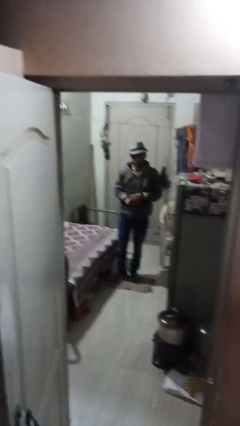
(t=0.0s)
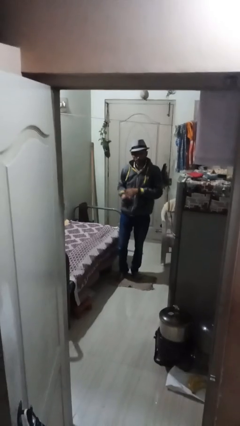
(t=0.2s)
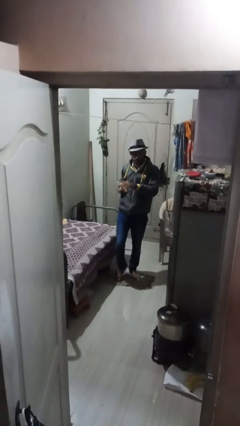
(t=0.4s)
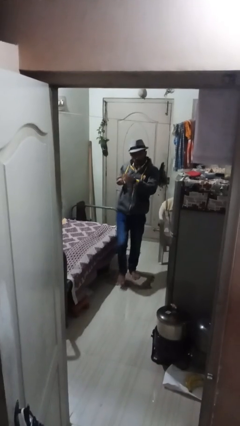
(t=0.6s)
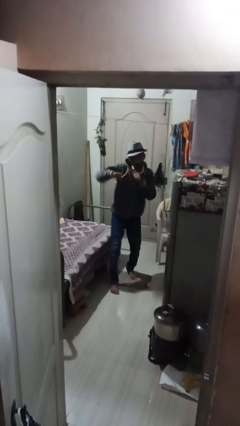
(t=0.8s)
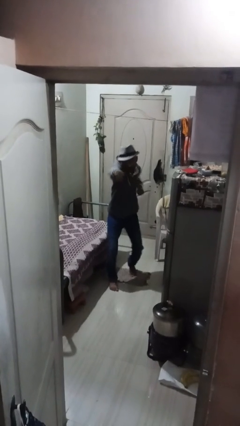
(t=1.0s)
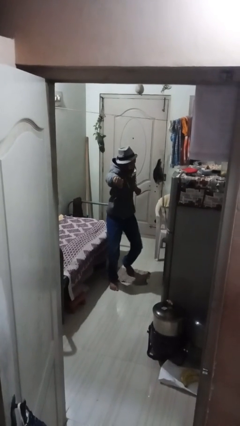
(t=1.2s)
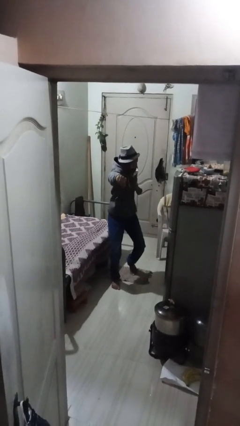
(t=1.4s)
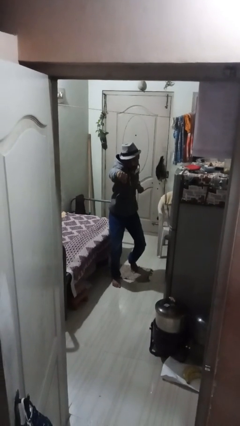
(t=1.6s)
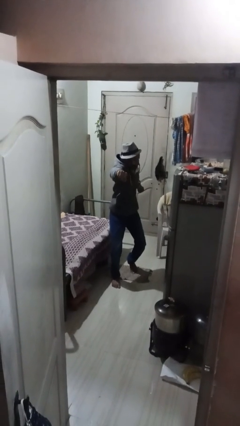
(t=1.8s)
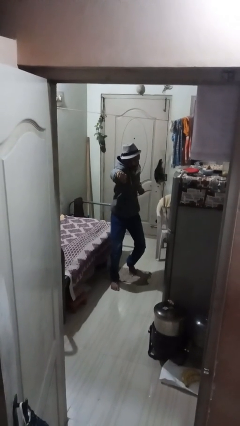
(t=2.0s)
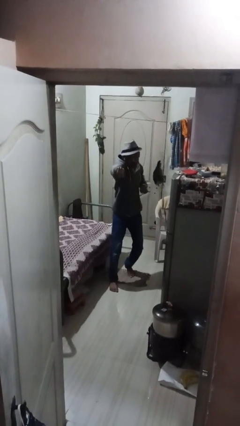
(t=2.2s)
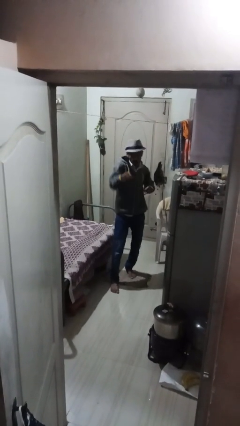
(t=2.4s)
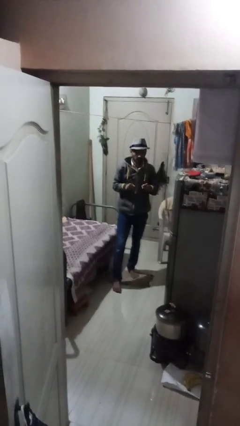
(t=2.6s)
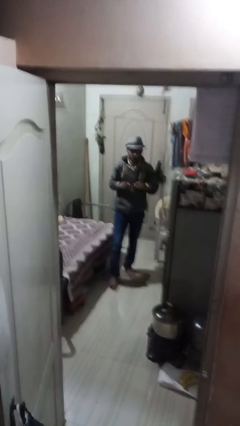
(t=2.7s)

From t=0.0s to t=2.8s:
person punches

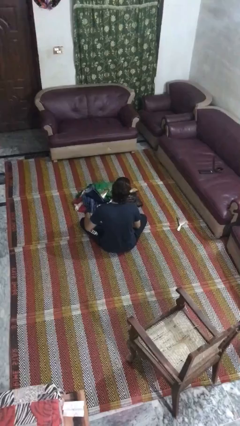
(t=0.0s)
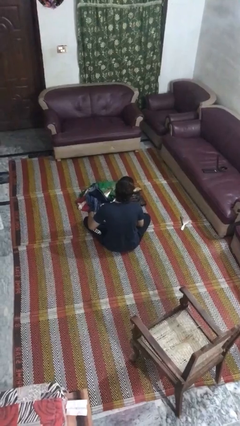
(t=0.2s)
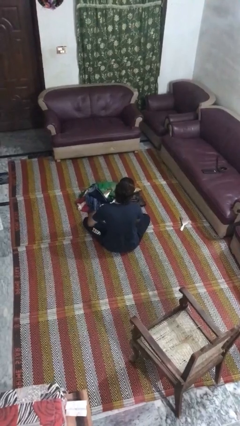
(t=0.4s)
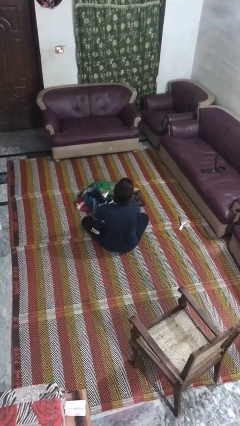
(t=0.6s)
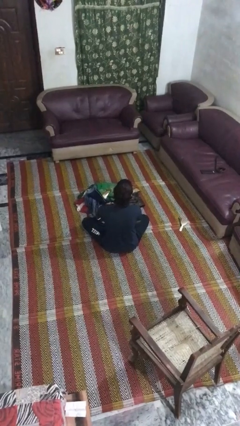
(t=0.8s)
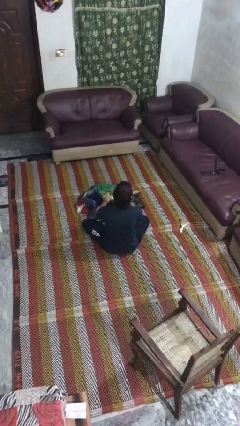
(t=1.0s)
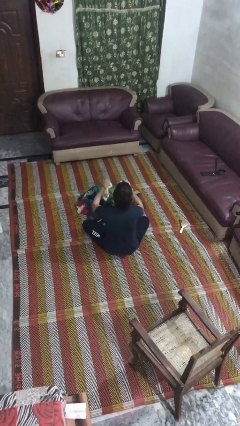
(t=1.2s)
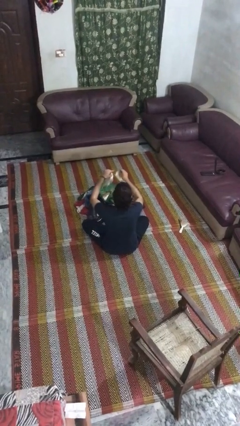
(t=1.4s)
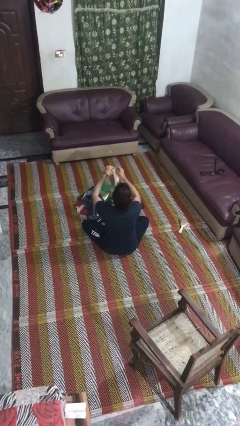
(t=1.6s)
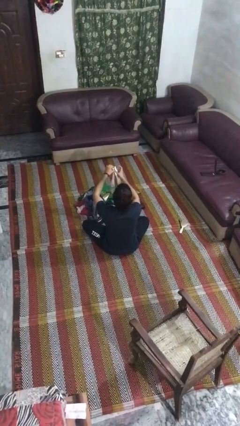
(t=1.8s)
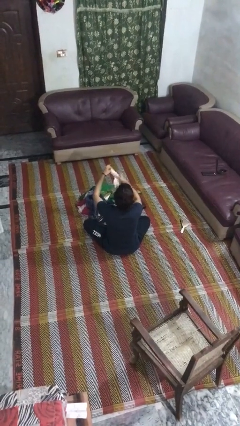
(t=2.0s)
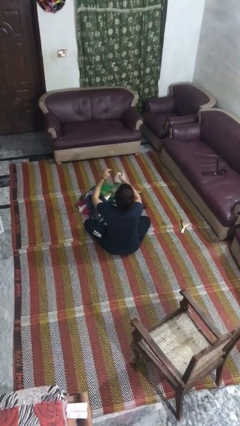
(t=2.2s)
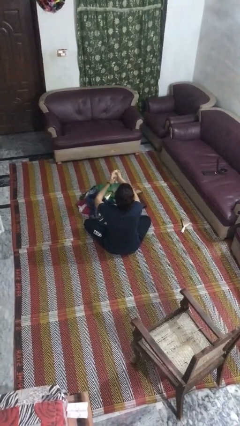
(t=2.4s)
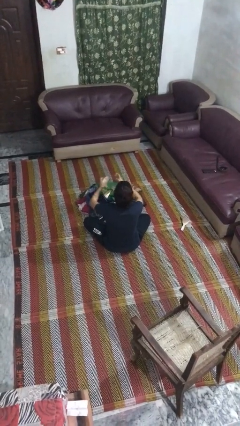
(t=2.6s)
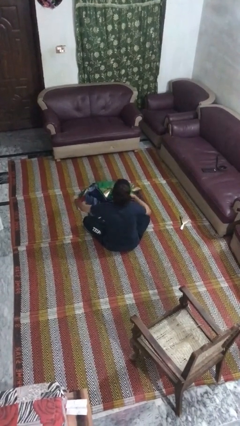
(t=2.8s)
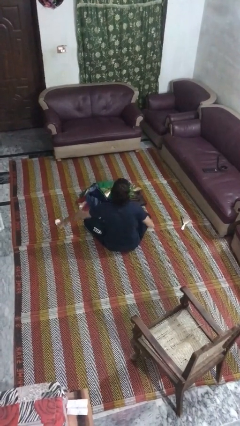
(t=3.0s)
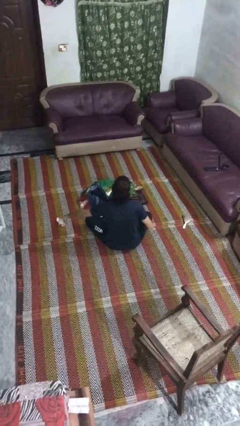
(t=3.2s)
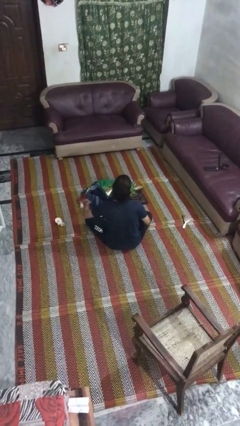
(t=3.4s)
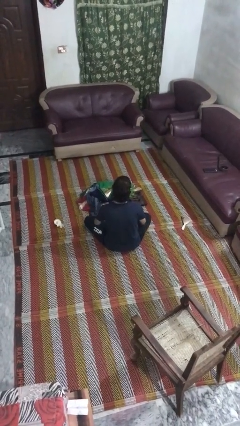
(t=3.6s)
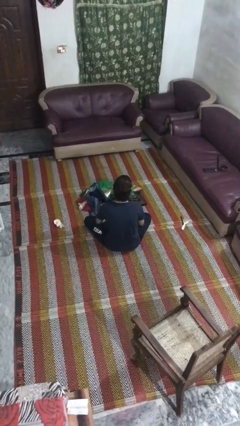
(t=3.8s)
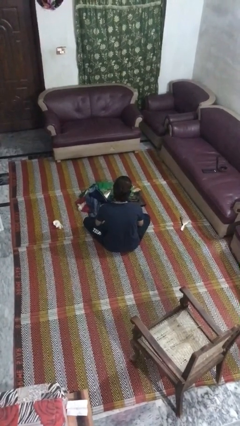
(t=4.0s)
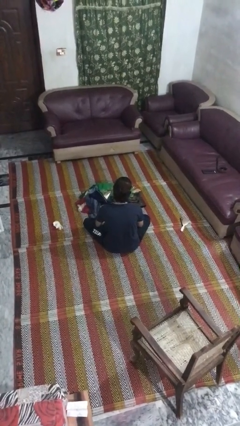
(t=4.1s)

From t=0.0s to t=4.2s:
person folds socks

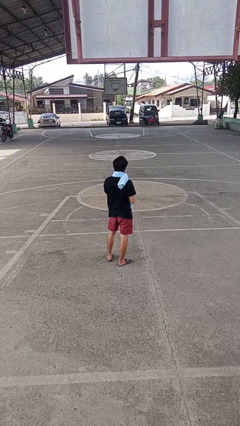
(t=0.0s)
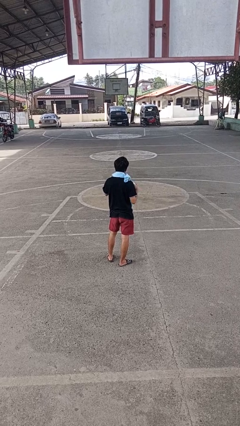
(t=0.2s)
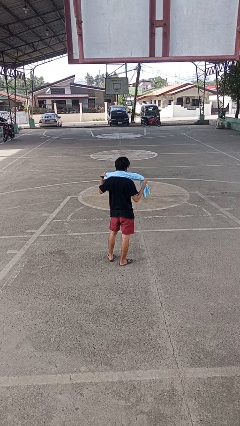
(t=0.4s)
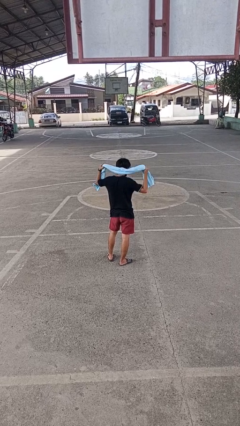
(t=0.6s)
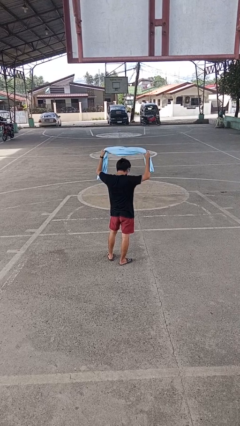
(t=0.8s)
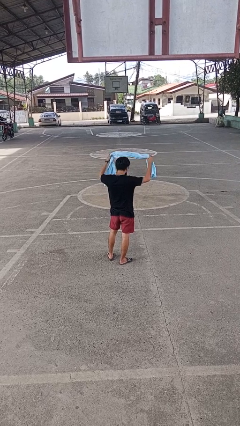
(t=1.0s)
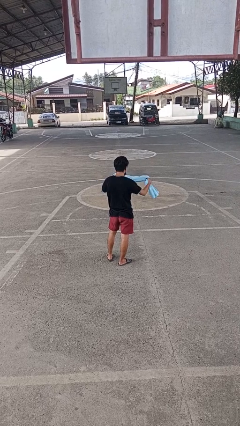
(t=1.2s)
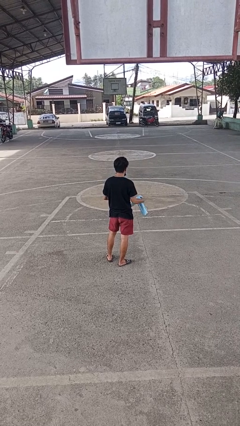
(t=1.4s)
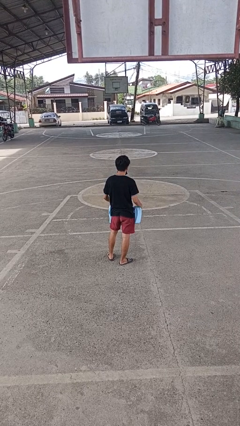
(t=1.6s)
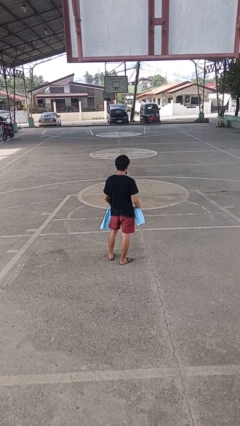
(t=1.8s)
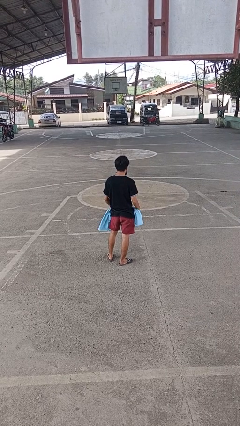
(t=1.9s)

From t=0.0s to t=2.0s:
person takes off scarf

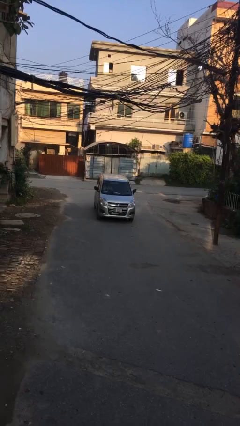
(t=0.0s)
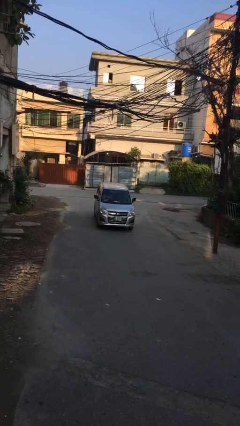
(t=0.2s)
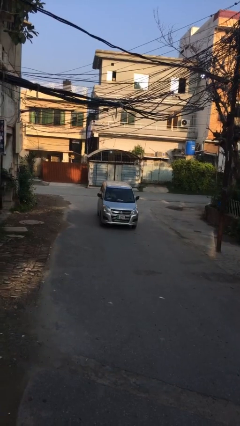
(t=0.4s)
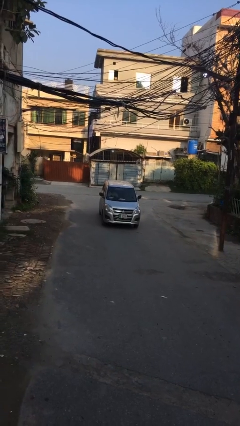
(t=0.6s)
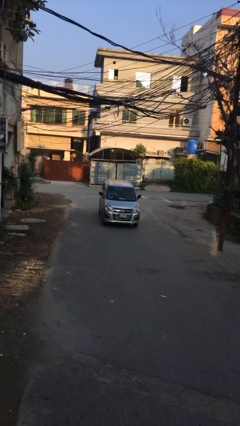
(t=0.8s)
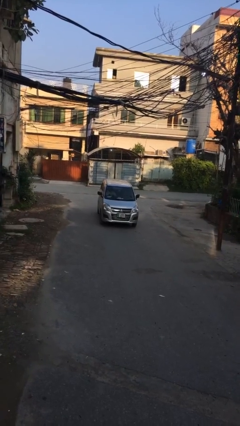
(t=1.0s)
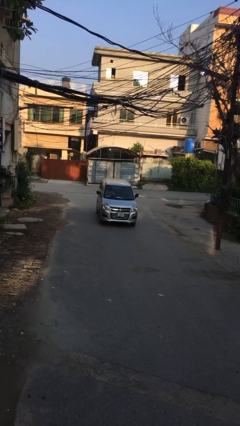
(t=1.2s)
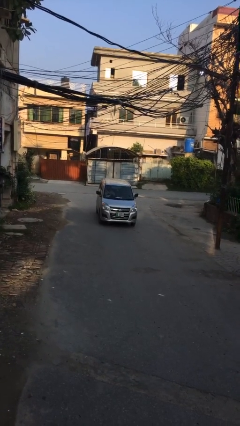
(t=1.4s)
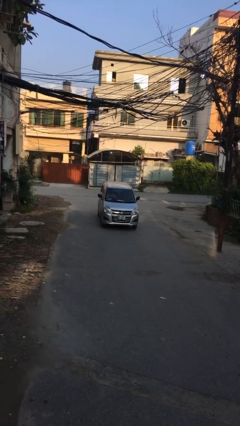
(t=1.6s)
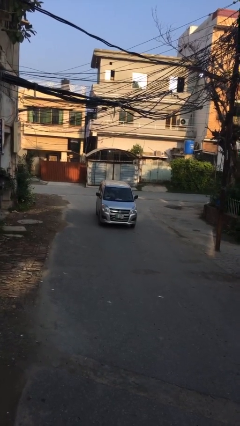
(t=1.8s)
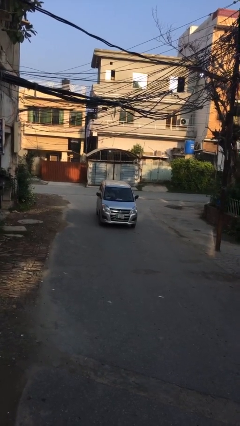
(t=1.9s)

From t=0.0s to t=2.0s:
car drops off person

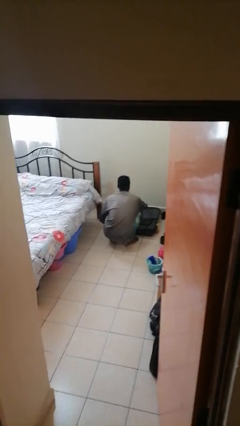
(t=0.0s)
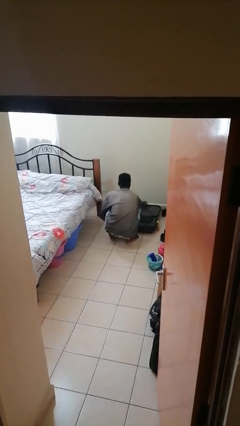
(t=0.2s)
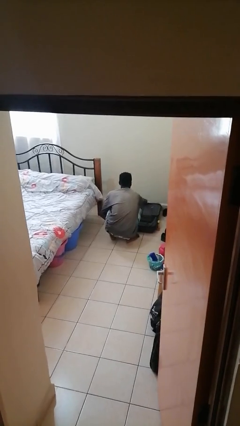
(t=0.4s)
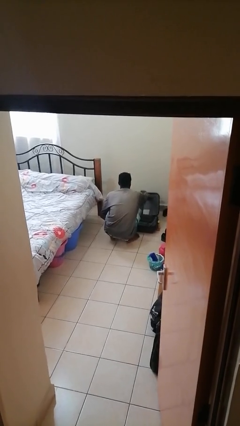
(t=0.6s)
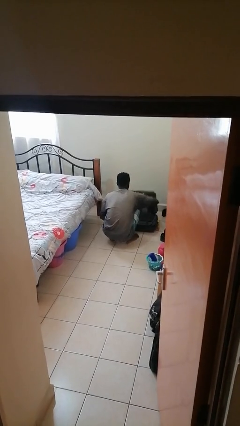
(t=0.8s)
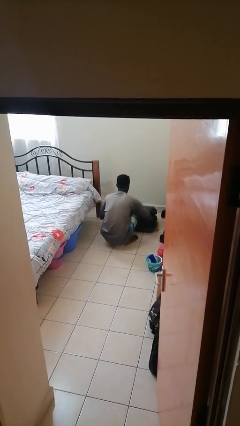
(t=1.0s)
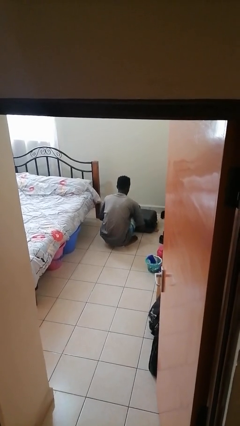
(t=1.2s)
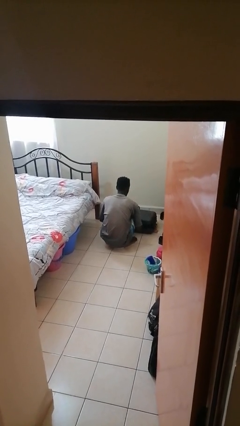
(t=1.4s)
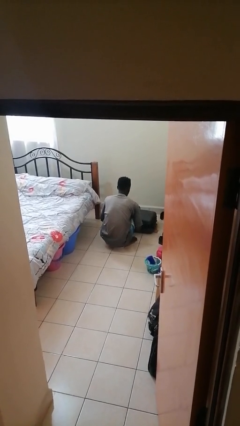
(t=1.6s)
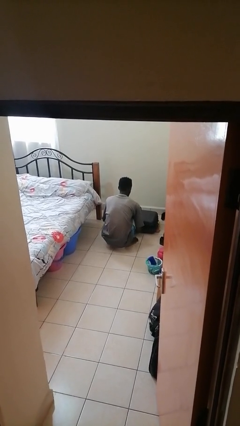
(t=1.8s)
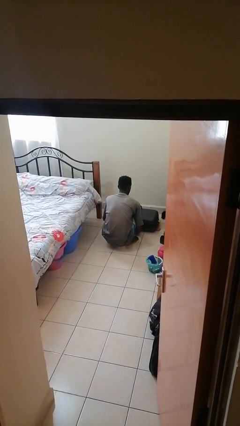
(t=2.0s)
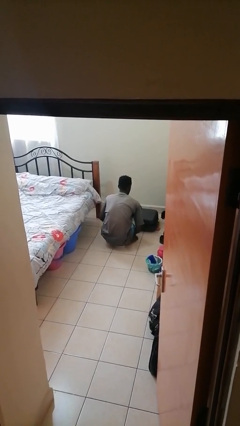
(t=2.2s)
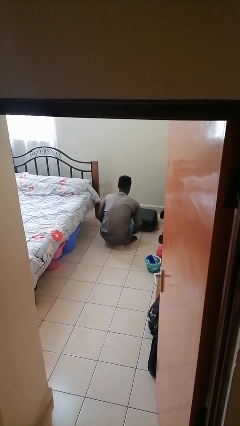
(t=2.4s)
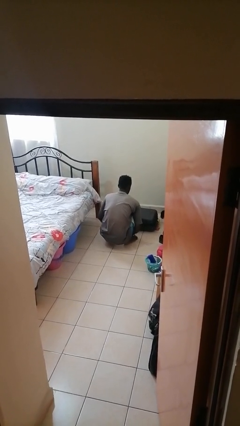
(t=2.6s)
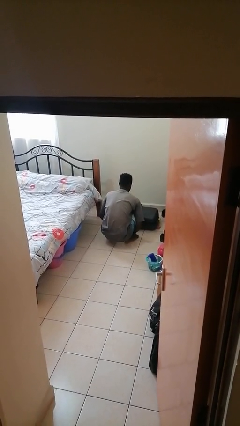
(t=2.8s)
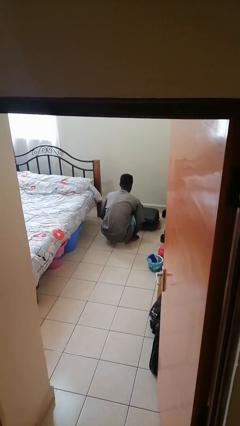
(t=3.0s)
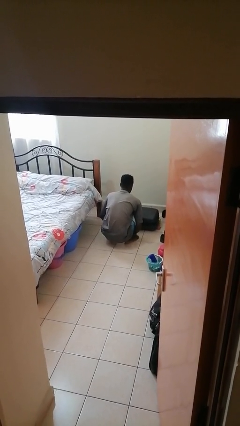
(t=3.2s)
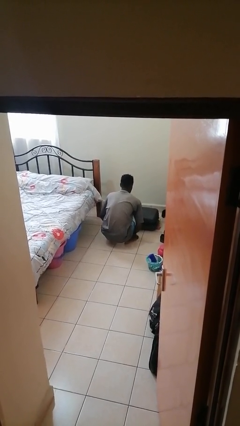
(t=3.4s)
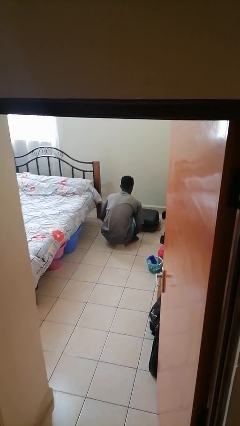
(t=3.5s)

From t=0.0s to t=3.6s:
person closes suitcase

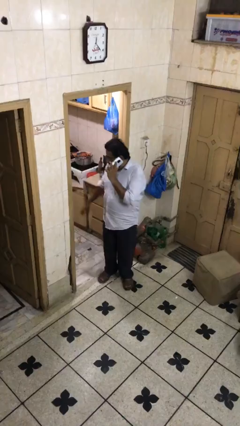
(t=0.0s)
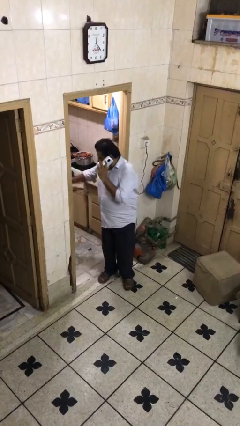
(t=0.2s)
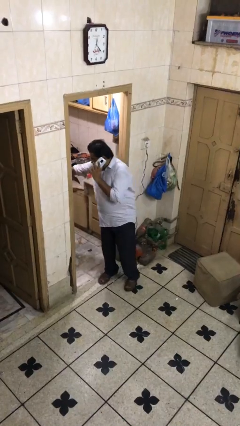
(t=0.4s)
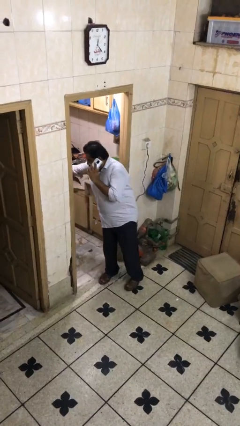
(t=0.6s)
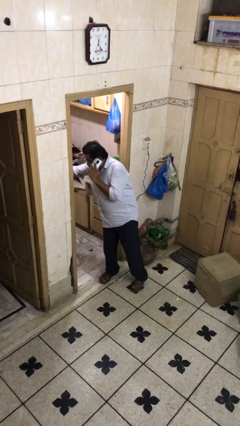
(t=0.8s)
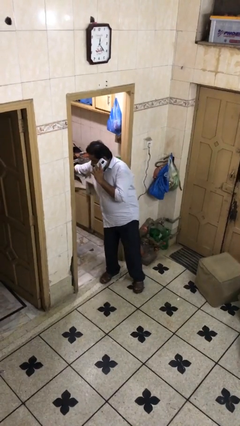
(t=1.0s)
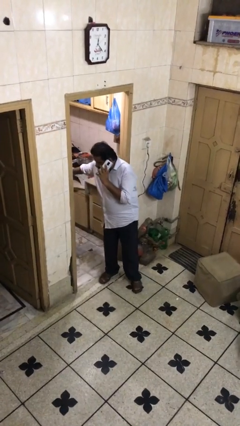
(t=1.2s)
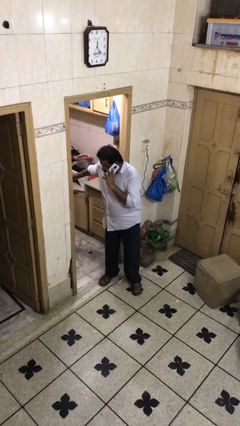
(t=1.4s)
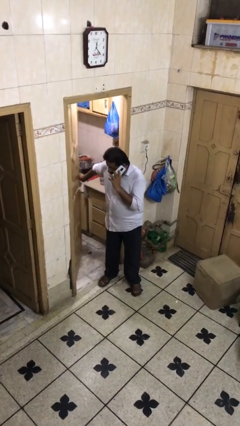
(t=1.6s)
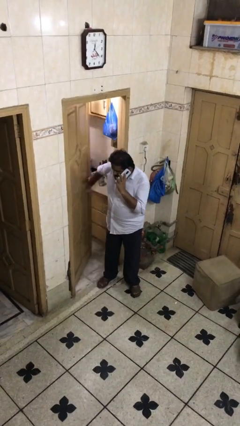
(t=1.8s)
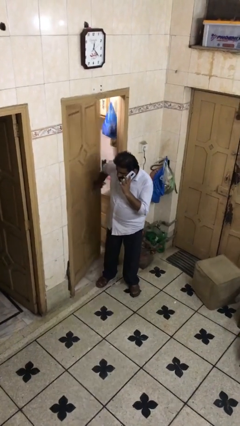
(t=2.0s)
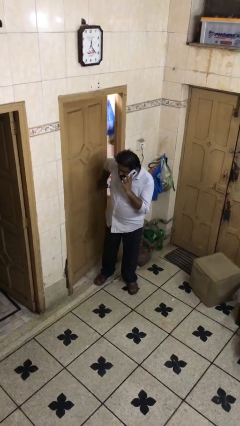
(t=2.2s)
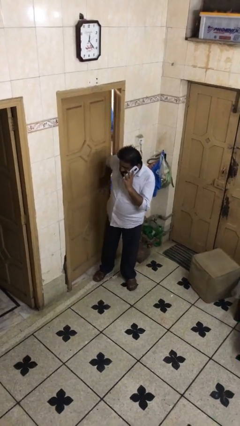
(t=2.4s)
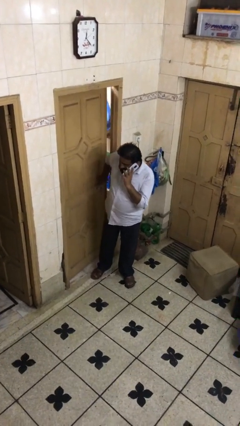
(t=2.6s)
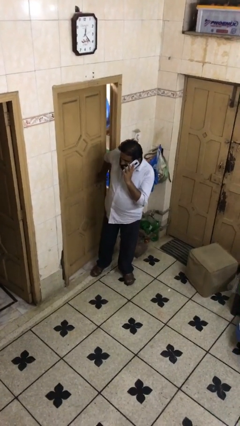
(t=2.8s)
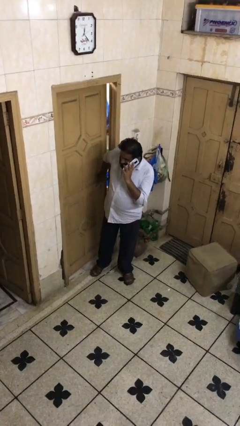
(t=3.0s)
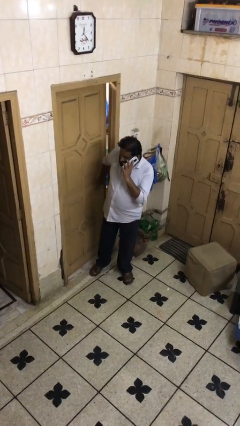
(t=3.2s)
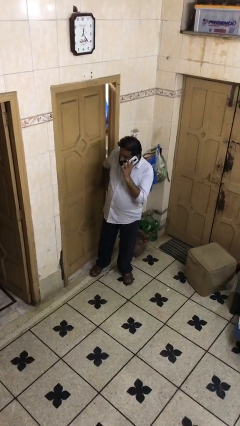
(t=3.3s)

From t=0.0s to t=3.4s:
person closes facility door
